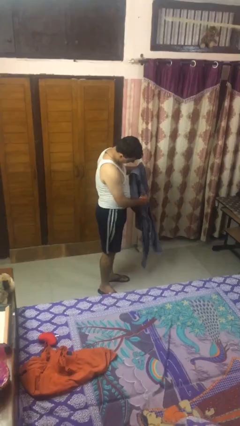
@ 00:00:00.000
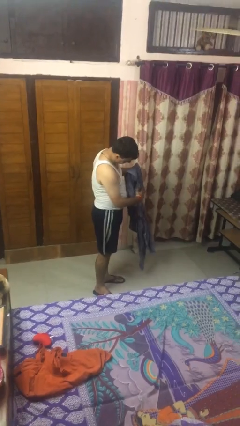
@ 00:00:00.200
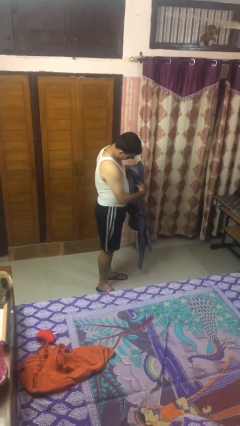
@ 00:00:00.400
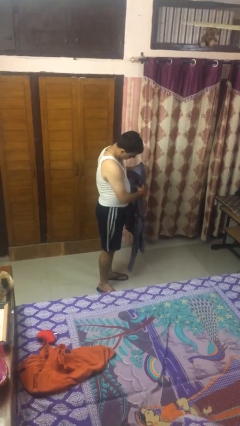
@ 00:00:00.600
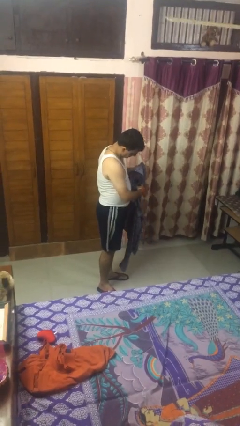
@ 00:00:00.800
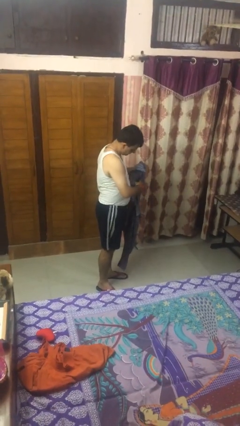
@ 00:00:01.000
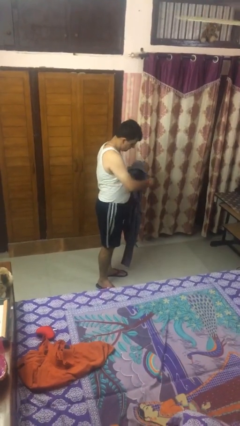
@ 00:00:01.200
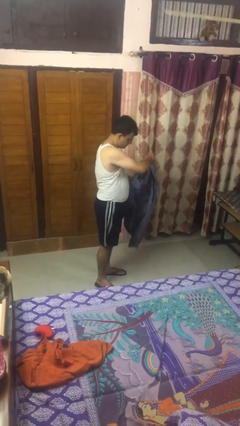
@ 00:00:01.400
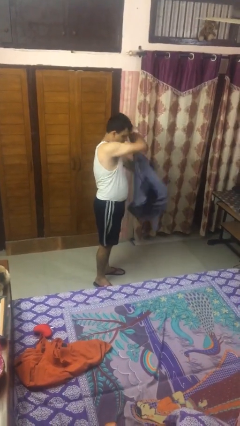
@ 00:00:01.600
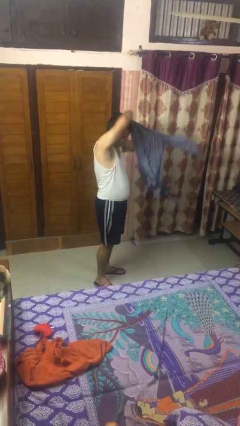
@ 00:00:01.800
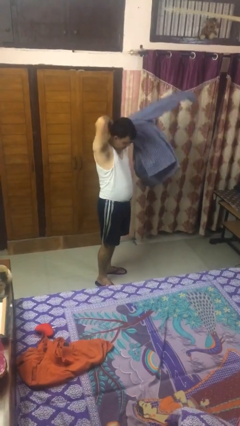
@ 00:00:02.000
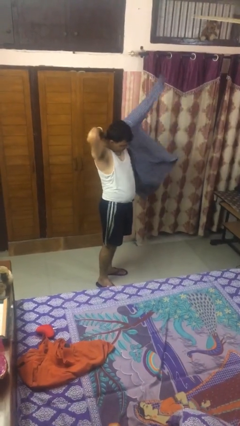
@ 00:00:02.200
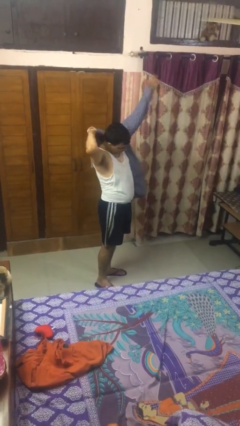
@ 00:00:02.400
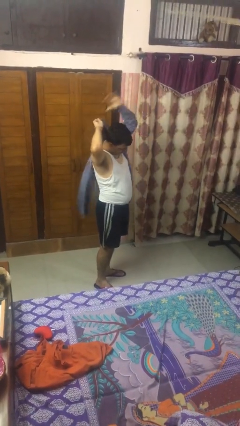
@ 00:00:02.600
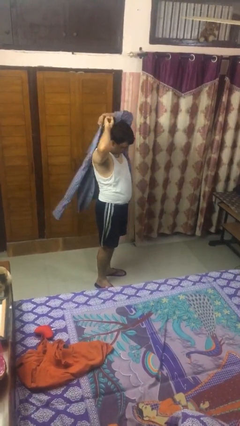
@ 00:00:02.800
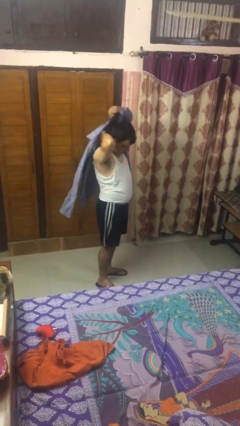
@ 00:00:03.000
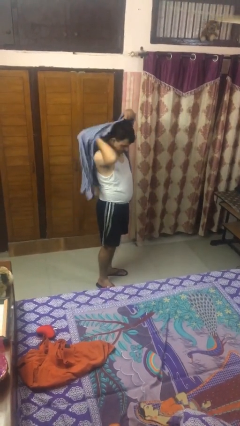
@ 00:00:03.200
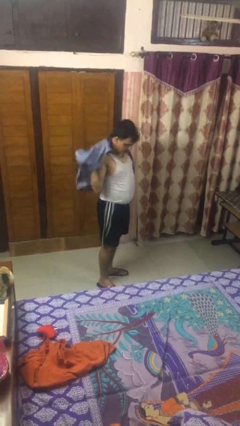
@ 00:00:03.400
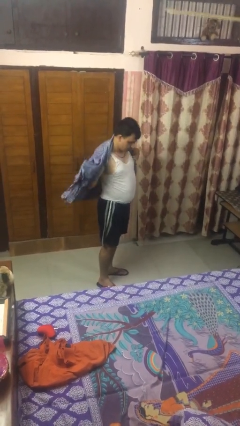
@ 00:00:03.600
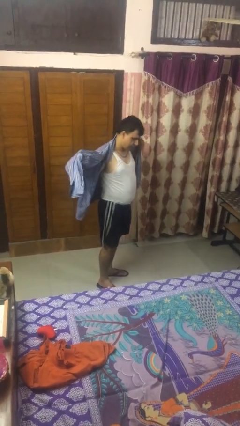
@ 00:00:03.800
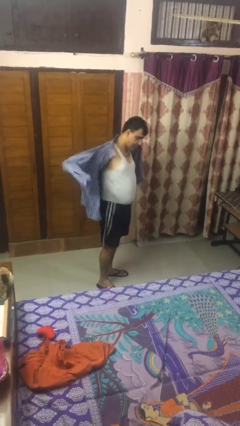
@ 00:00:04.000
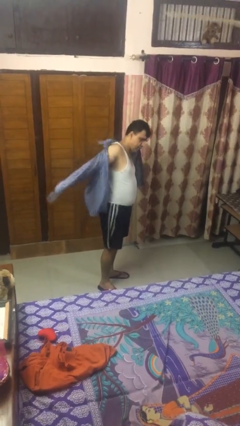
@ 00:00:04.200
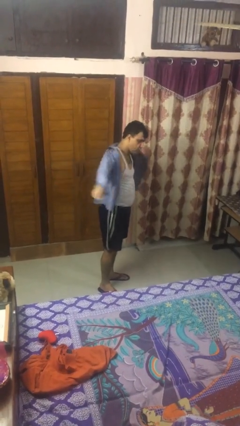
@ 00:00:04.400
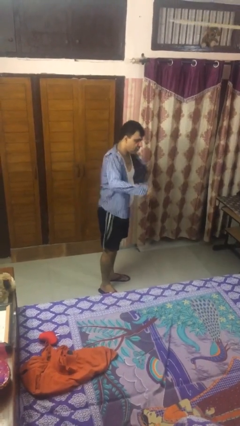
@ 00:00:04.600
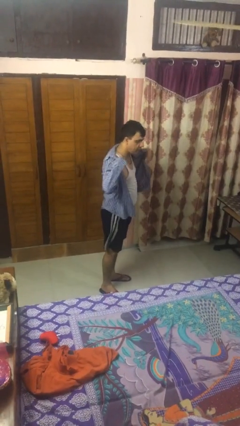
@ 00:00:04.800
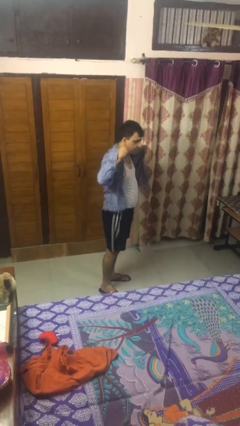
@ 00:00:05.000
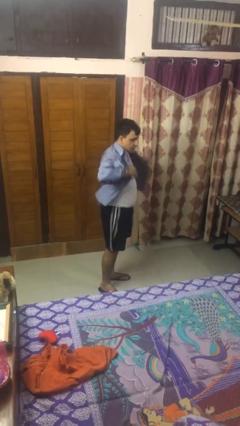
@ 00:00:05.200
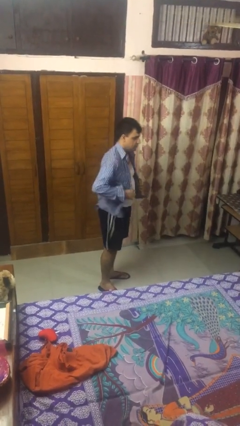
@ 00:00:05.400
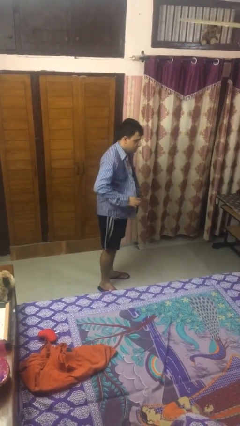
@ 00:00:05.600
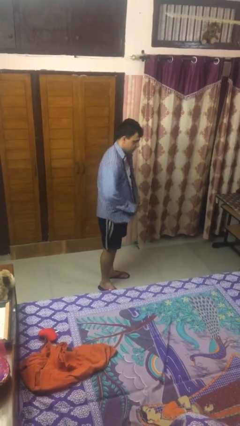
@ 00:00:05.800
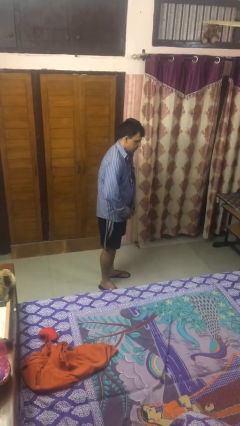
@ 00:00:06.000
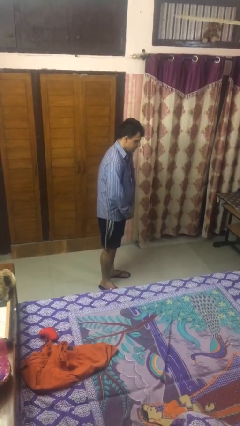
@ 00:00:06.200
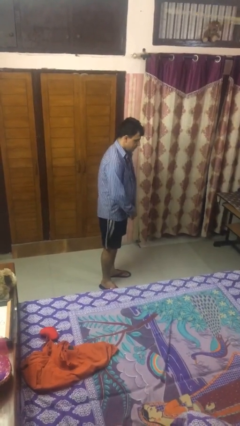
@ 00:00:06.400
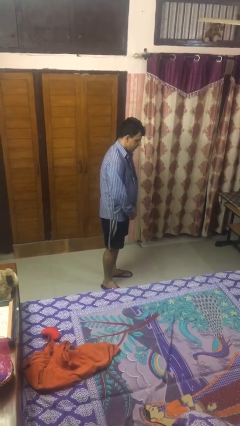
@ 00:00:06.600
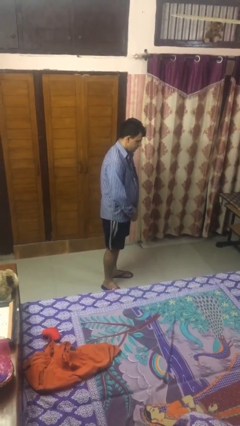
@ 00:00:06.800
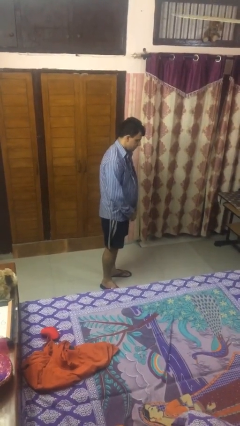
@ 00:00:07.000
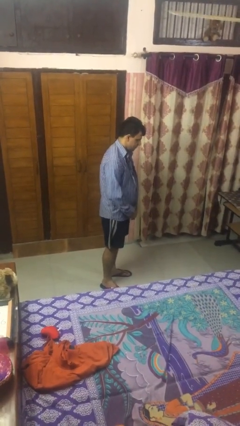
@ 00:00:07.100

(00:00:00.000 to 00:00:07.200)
person puts on shirt

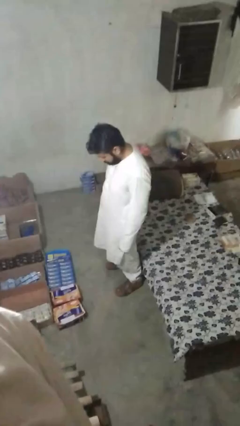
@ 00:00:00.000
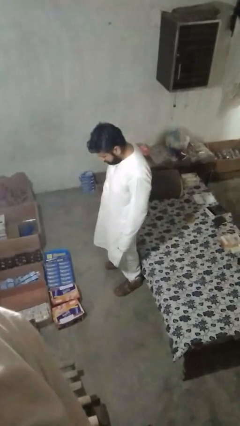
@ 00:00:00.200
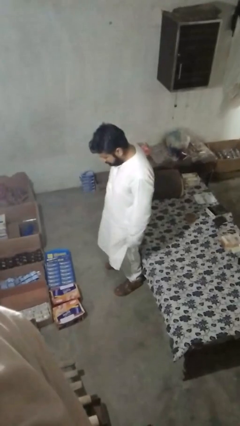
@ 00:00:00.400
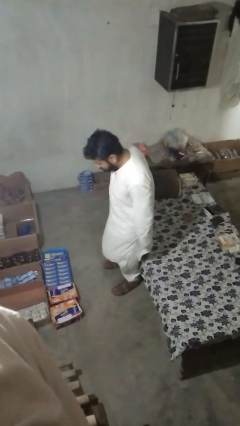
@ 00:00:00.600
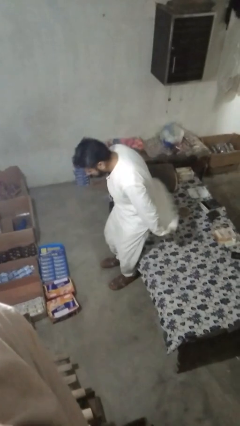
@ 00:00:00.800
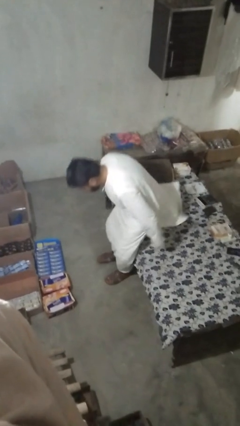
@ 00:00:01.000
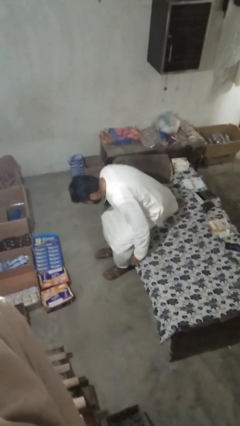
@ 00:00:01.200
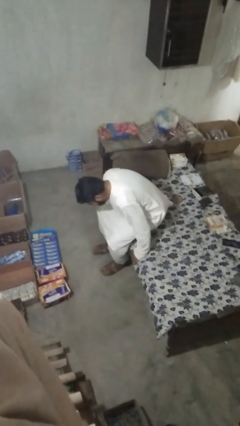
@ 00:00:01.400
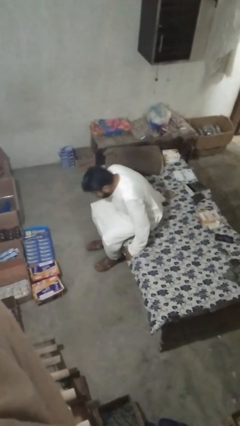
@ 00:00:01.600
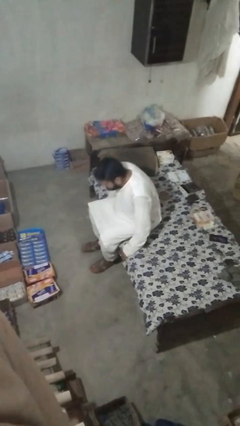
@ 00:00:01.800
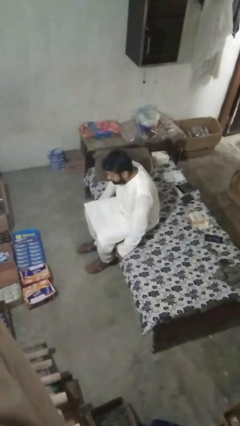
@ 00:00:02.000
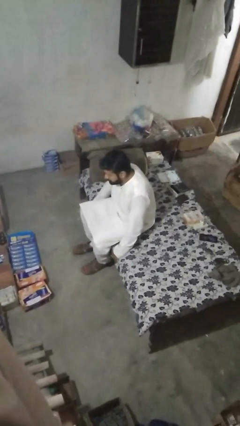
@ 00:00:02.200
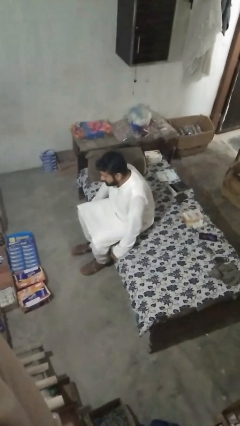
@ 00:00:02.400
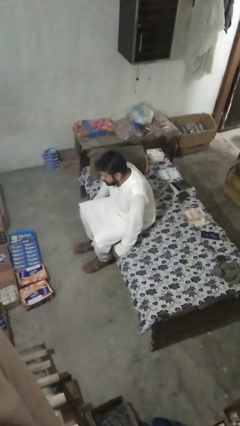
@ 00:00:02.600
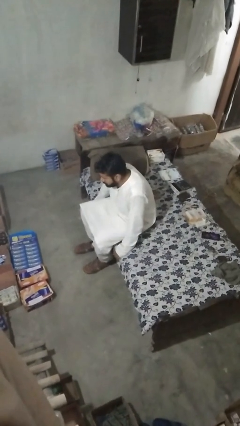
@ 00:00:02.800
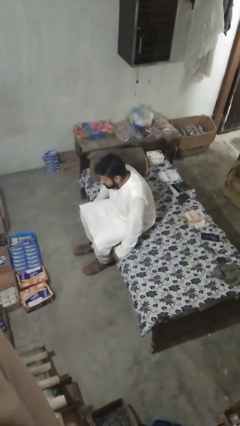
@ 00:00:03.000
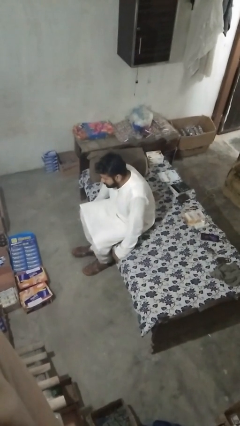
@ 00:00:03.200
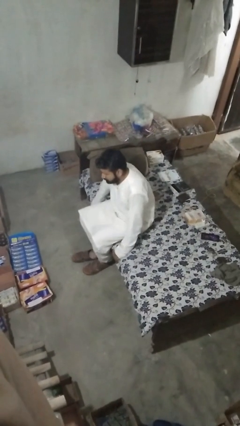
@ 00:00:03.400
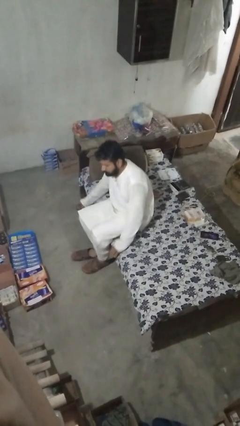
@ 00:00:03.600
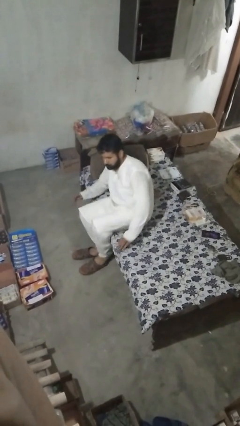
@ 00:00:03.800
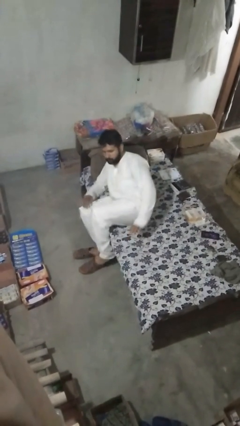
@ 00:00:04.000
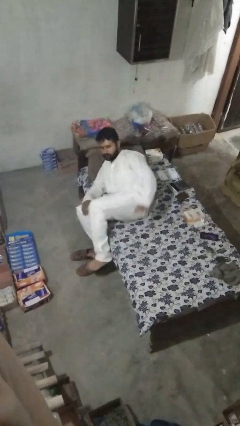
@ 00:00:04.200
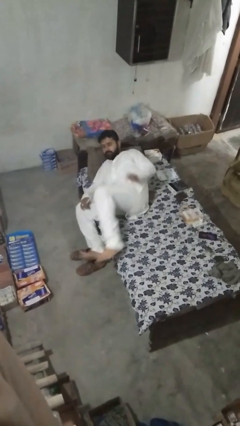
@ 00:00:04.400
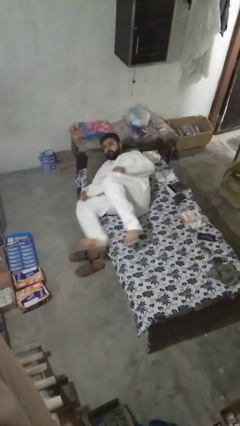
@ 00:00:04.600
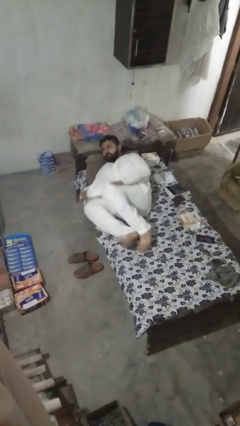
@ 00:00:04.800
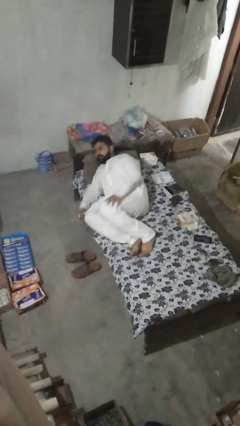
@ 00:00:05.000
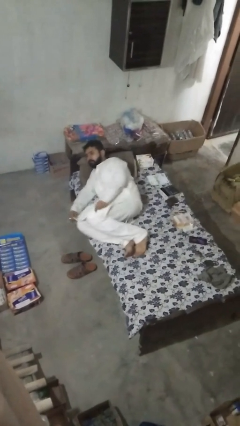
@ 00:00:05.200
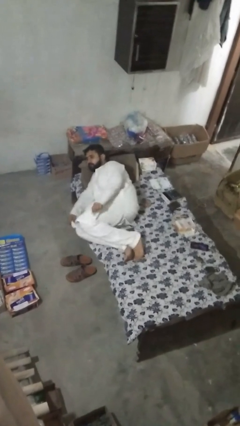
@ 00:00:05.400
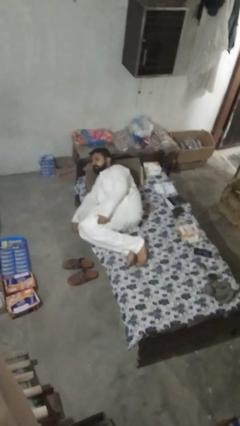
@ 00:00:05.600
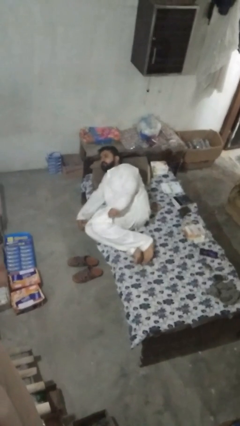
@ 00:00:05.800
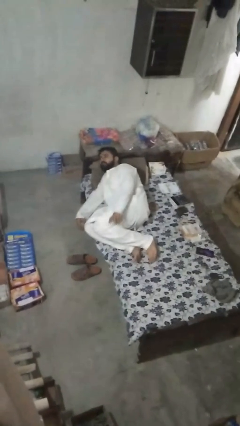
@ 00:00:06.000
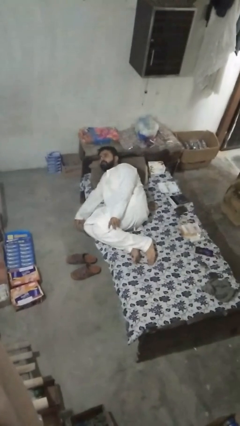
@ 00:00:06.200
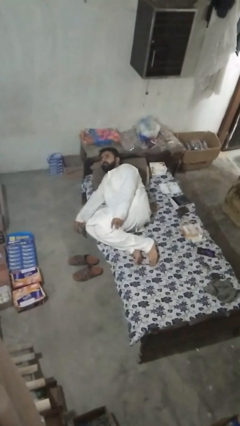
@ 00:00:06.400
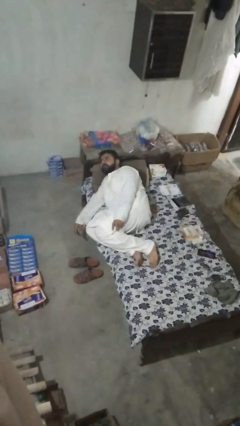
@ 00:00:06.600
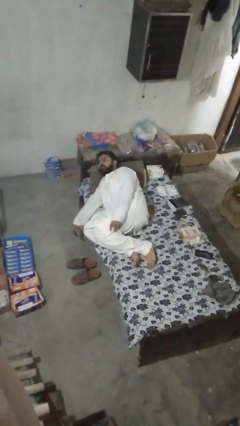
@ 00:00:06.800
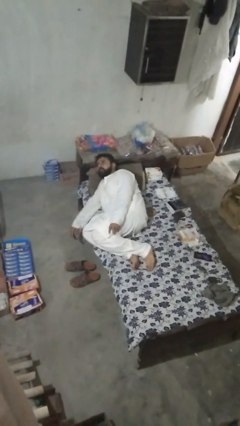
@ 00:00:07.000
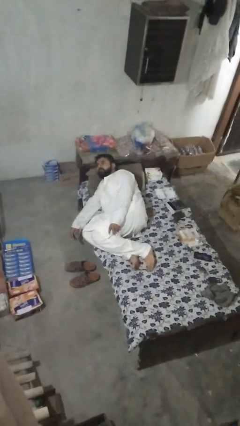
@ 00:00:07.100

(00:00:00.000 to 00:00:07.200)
person lies down on bed

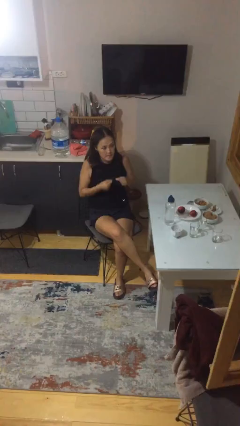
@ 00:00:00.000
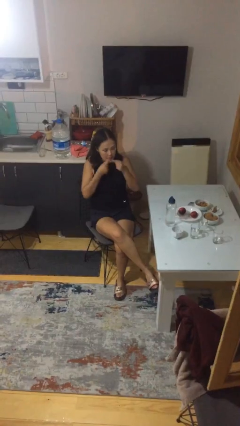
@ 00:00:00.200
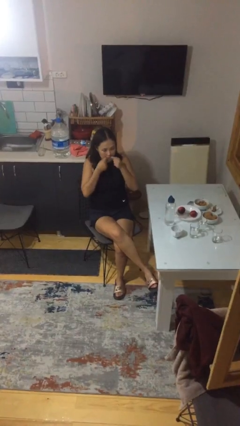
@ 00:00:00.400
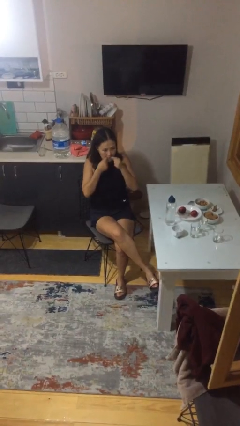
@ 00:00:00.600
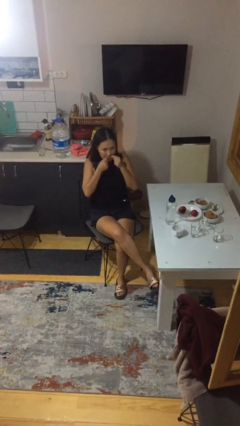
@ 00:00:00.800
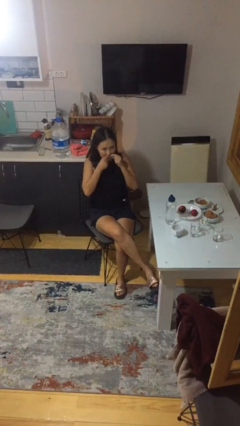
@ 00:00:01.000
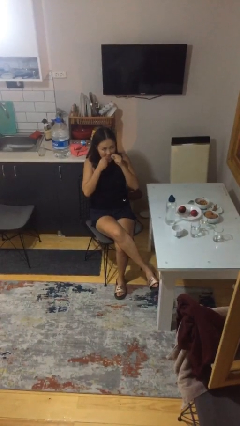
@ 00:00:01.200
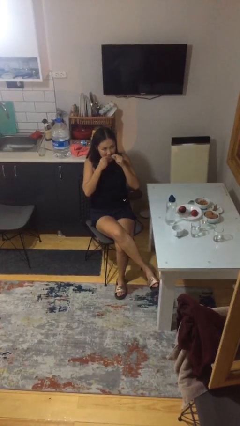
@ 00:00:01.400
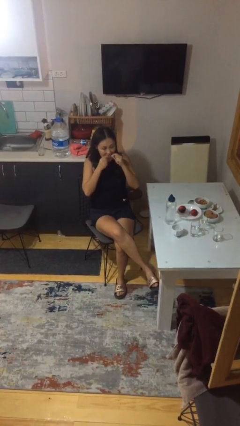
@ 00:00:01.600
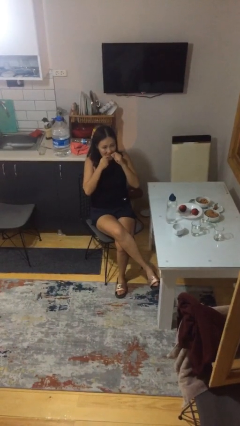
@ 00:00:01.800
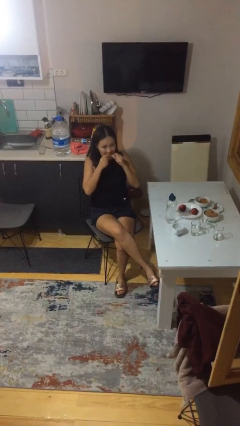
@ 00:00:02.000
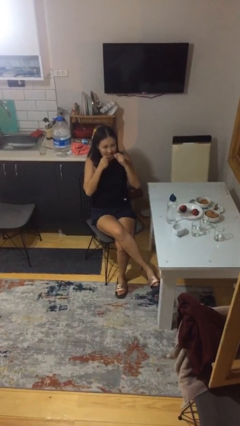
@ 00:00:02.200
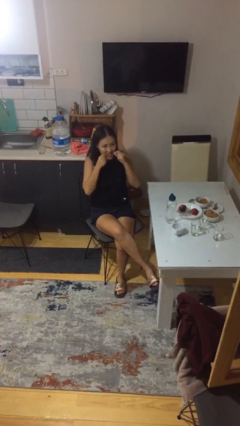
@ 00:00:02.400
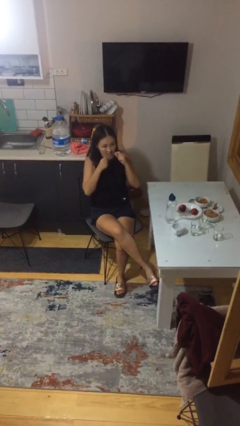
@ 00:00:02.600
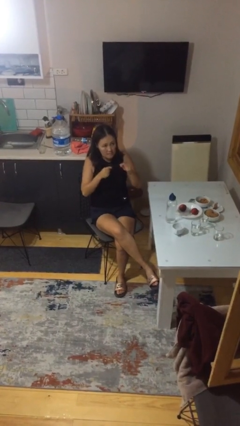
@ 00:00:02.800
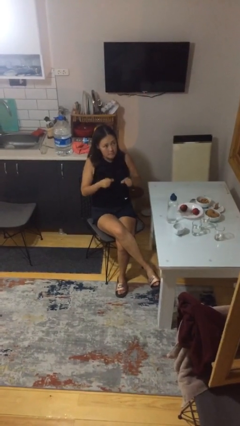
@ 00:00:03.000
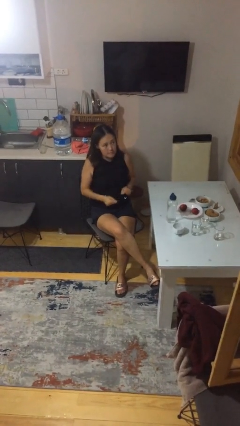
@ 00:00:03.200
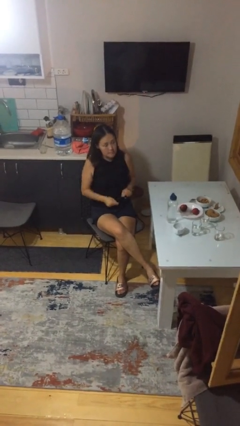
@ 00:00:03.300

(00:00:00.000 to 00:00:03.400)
person flosses
